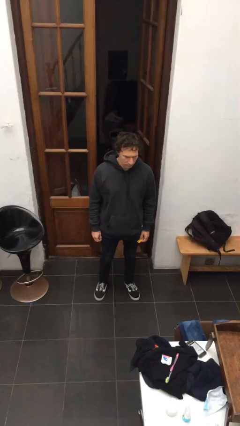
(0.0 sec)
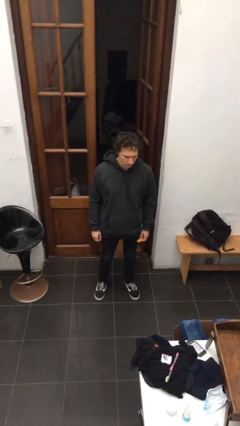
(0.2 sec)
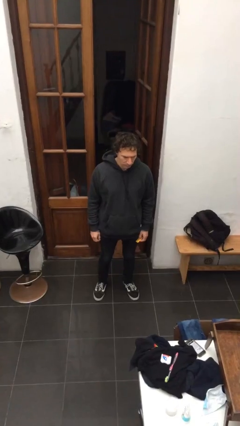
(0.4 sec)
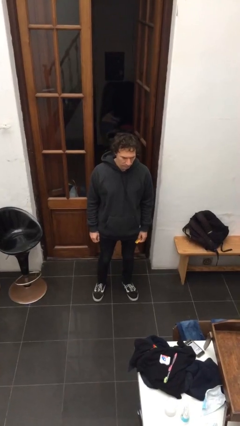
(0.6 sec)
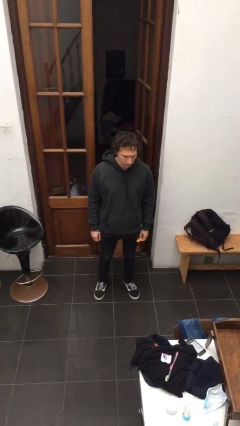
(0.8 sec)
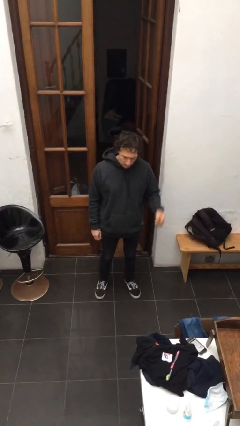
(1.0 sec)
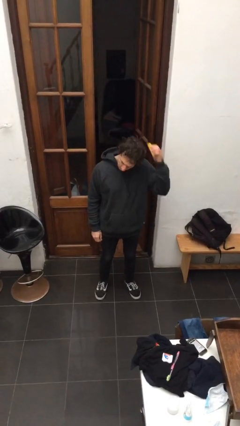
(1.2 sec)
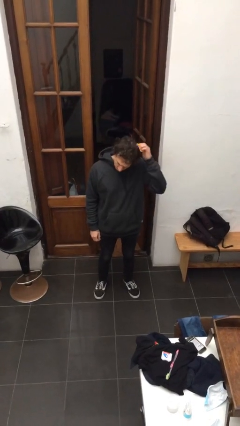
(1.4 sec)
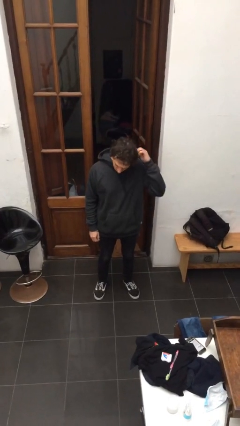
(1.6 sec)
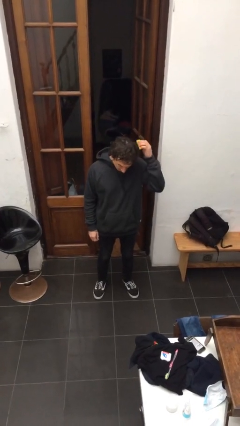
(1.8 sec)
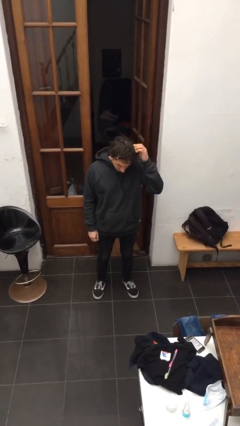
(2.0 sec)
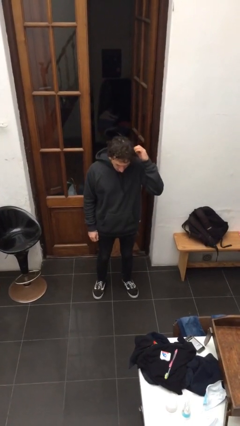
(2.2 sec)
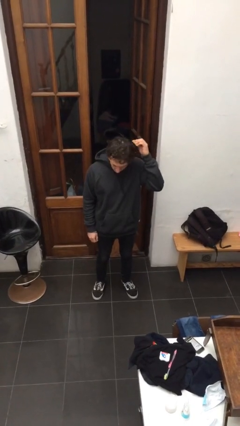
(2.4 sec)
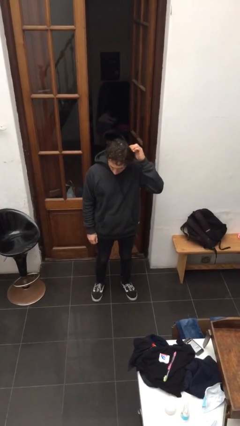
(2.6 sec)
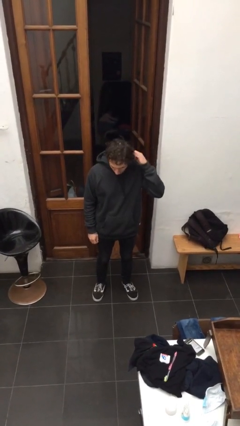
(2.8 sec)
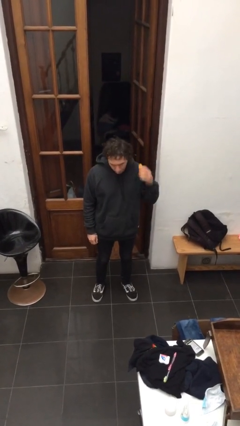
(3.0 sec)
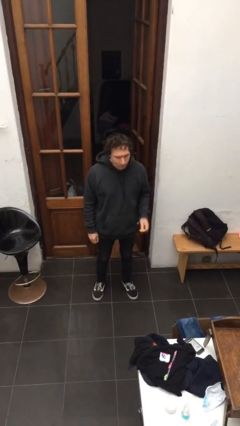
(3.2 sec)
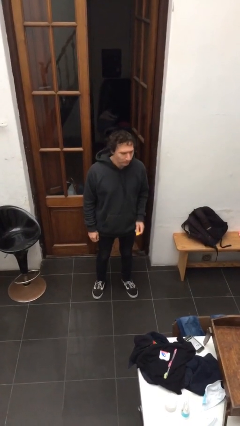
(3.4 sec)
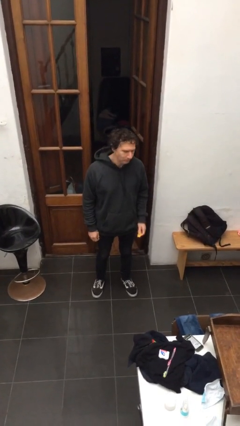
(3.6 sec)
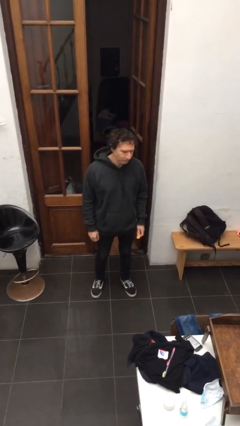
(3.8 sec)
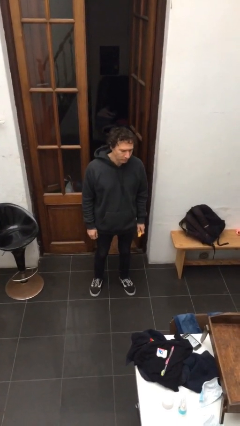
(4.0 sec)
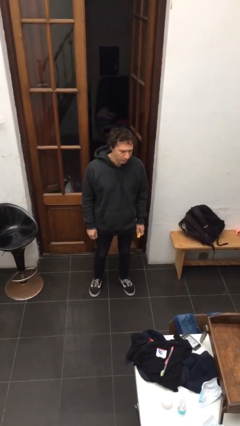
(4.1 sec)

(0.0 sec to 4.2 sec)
person brushes hair

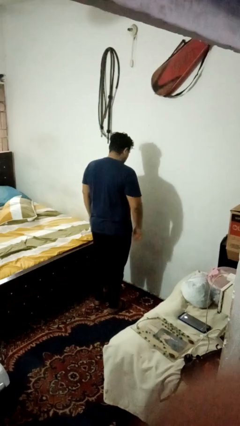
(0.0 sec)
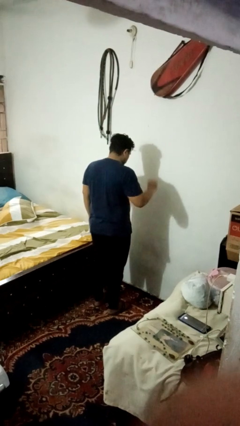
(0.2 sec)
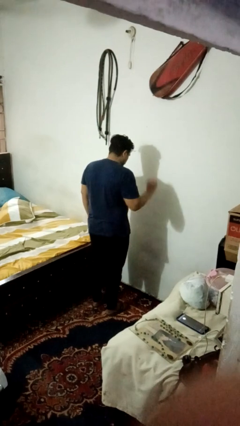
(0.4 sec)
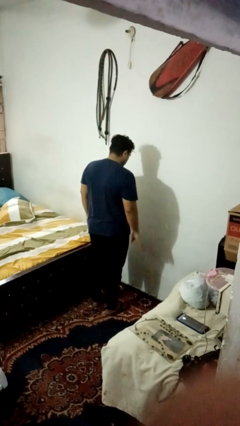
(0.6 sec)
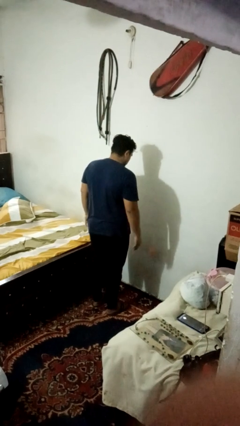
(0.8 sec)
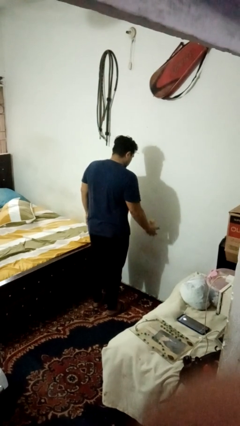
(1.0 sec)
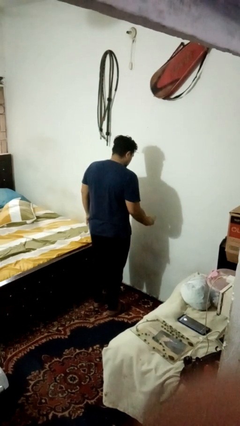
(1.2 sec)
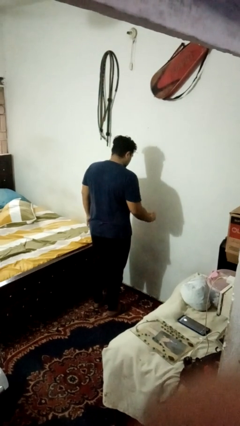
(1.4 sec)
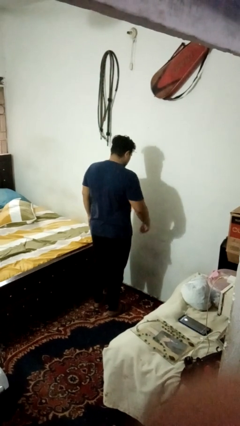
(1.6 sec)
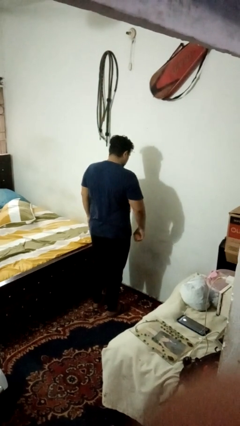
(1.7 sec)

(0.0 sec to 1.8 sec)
person bounces ball on floor

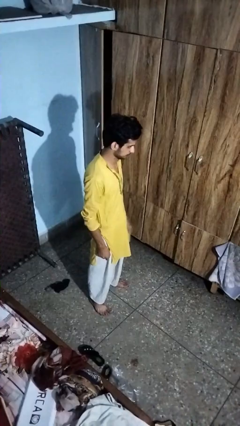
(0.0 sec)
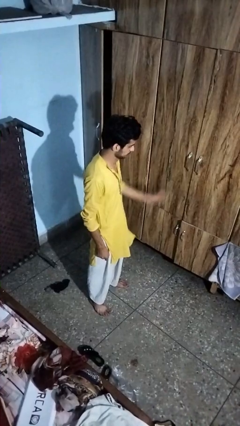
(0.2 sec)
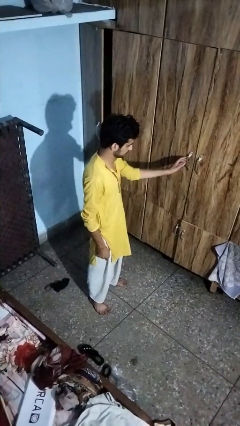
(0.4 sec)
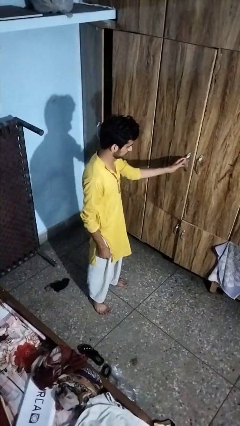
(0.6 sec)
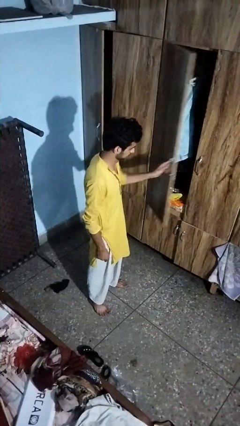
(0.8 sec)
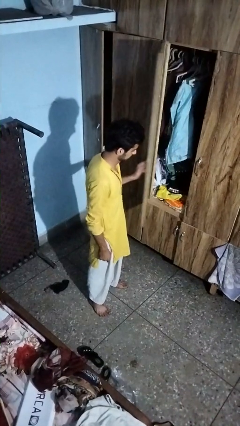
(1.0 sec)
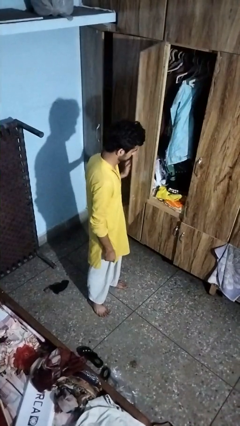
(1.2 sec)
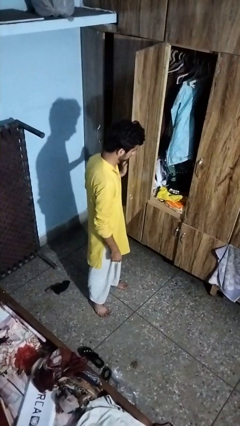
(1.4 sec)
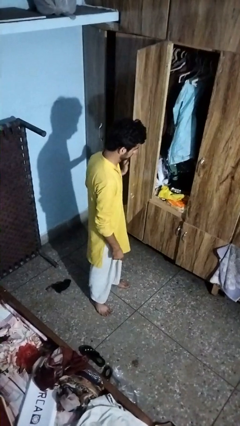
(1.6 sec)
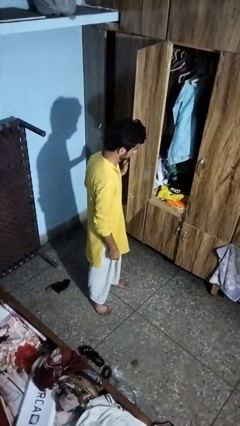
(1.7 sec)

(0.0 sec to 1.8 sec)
person opens closet door

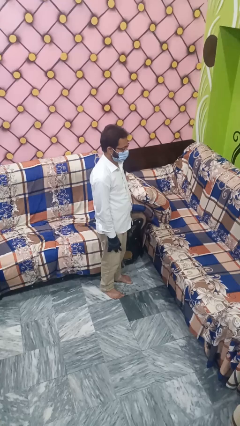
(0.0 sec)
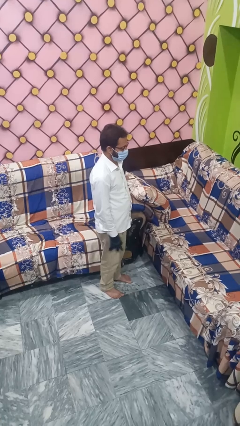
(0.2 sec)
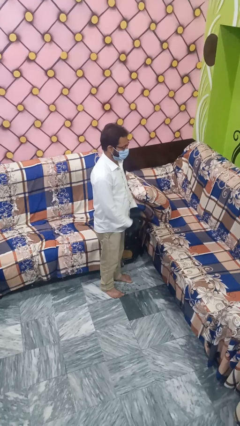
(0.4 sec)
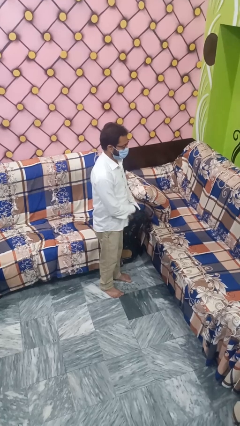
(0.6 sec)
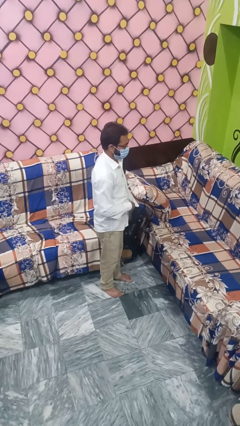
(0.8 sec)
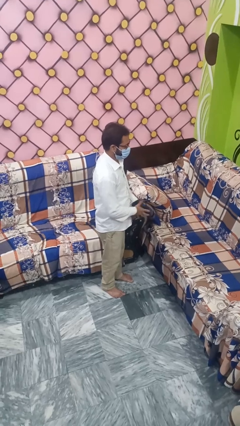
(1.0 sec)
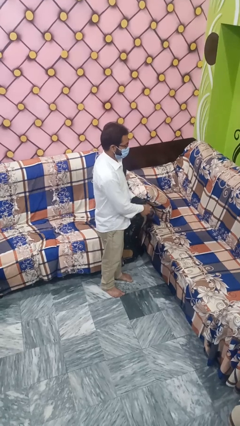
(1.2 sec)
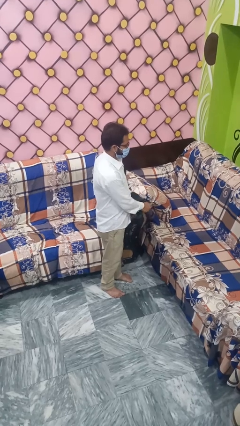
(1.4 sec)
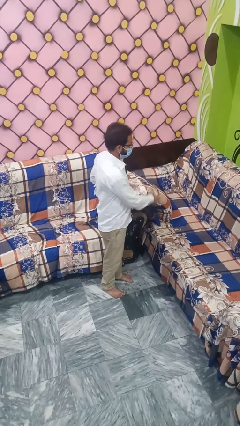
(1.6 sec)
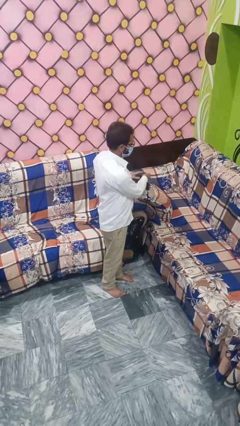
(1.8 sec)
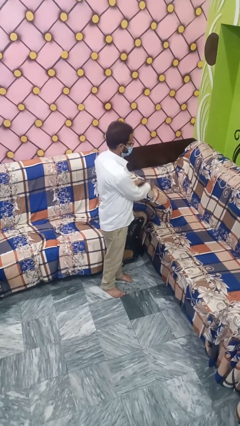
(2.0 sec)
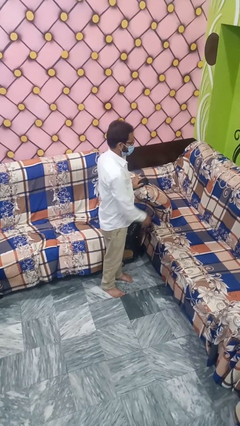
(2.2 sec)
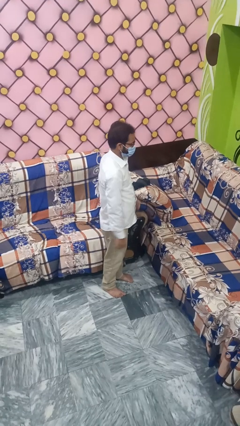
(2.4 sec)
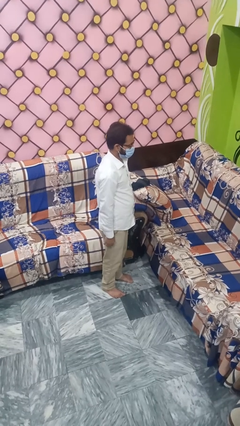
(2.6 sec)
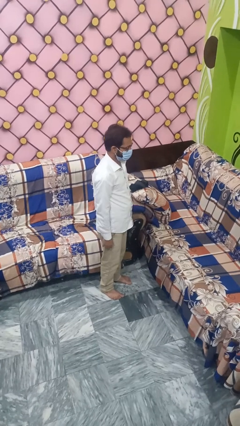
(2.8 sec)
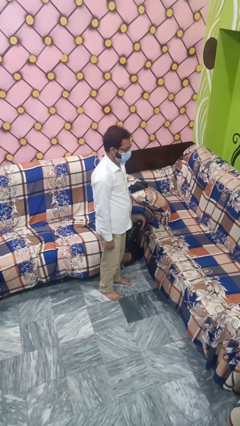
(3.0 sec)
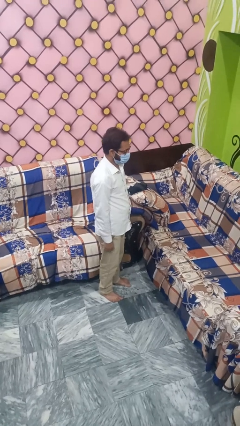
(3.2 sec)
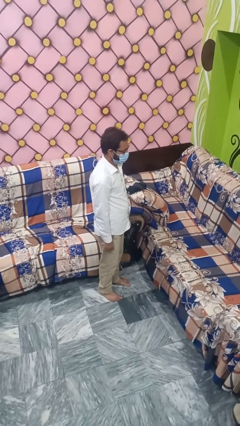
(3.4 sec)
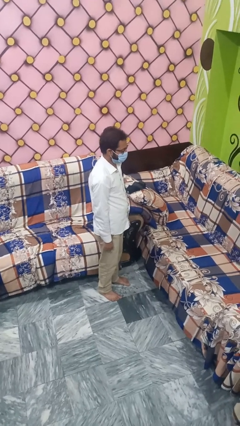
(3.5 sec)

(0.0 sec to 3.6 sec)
person takes off gloves

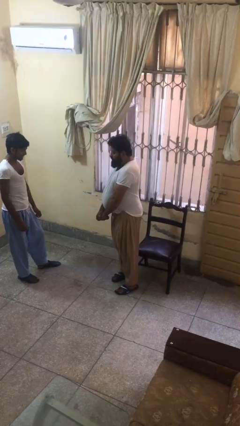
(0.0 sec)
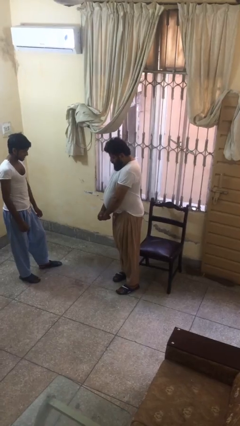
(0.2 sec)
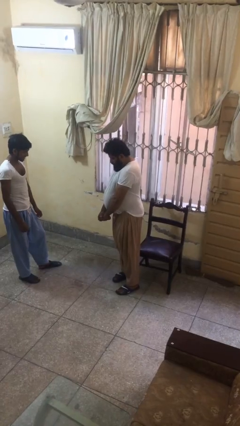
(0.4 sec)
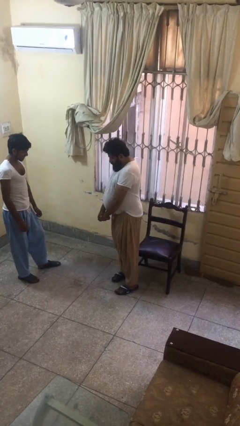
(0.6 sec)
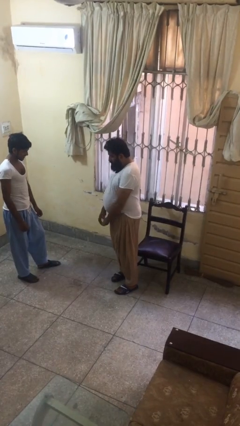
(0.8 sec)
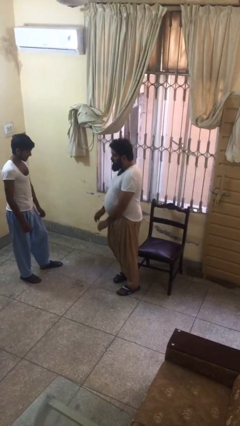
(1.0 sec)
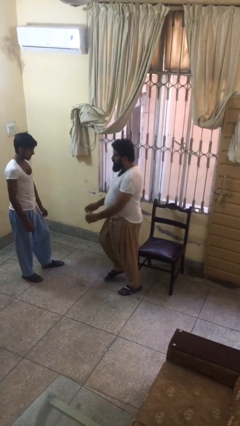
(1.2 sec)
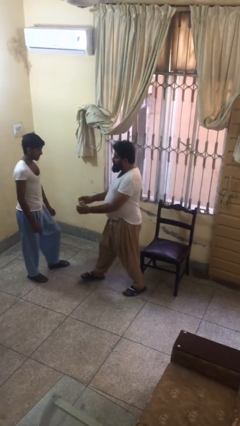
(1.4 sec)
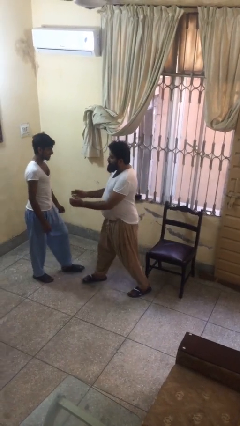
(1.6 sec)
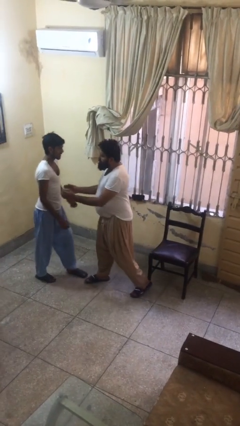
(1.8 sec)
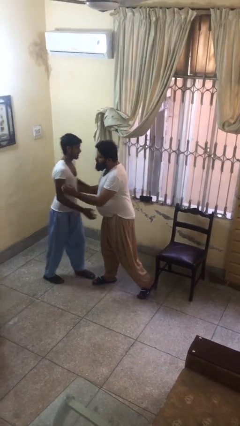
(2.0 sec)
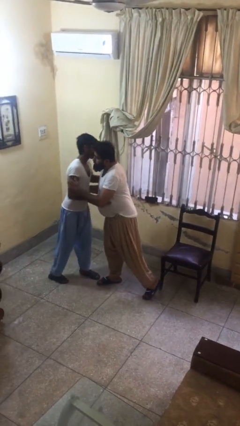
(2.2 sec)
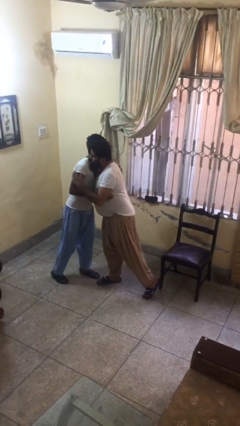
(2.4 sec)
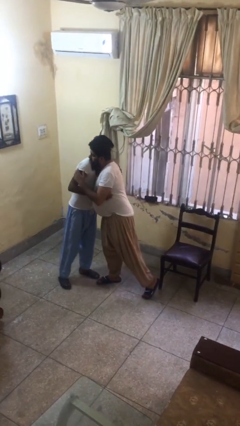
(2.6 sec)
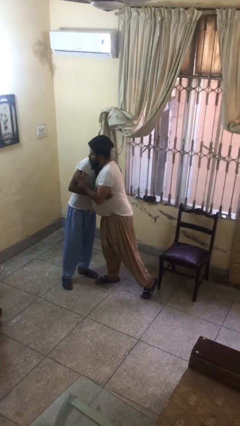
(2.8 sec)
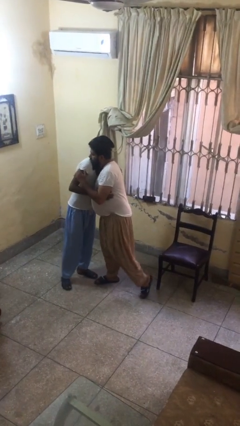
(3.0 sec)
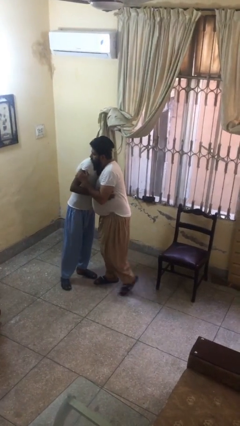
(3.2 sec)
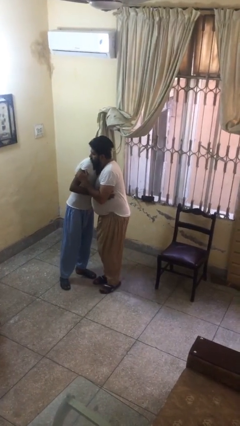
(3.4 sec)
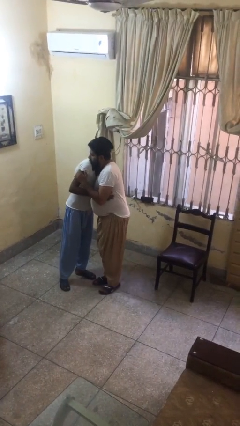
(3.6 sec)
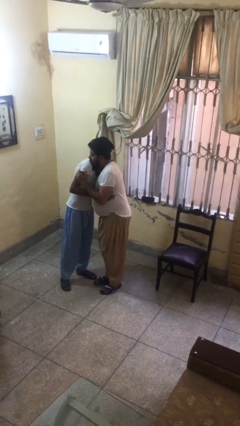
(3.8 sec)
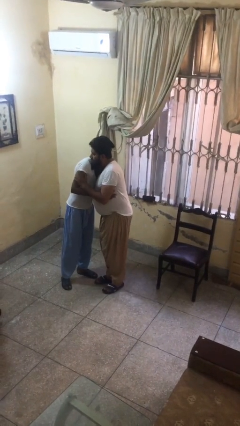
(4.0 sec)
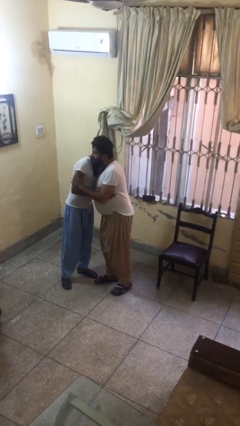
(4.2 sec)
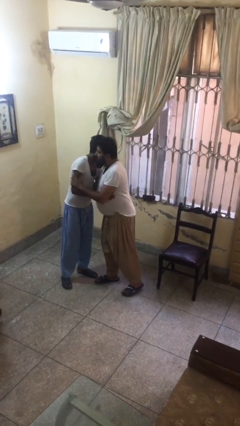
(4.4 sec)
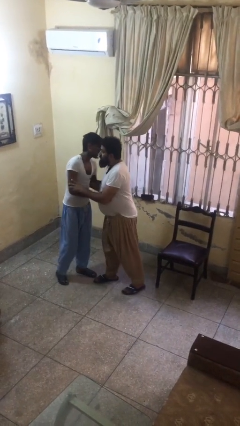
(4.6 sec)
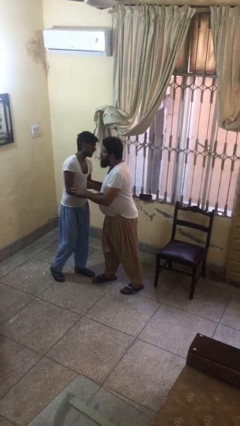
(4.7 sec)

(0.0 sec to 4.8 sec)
person embraces person

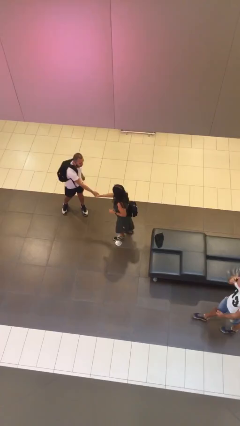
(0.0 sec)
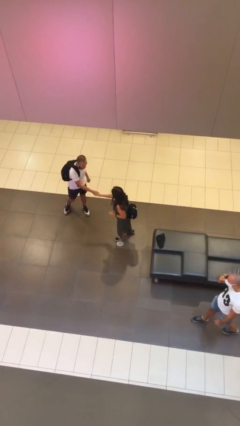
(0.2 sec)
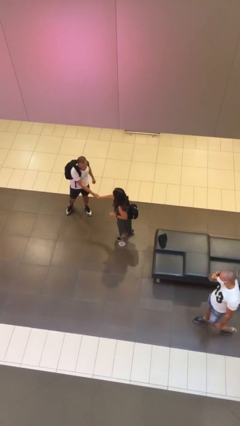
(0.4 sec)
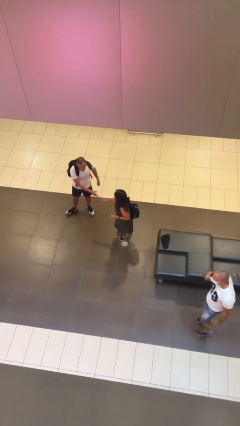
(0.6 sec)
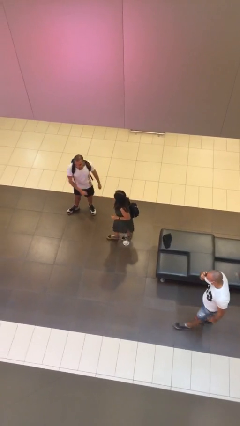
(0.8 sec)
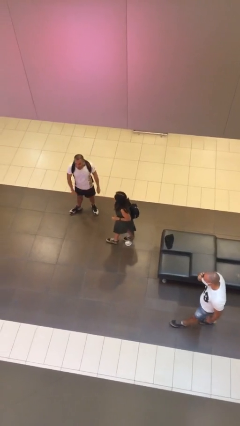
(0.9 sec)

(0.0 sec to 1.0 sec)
person shakes hand

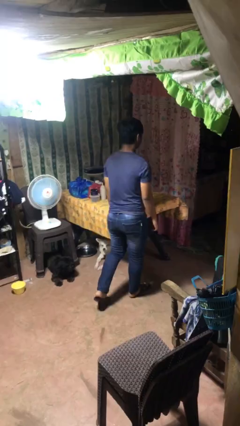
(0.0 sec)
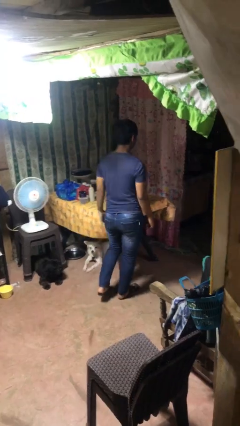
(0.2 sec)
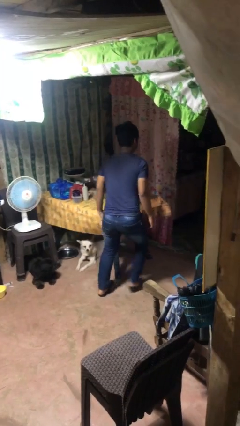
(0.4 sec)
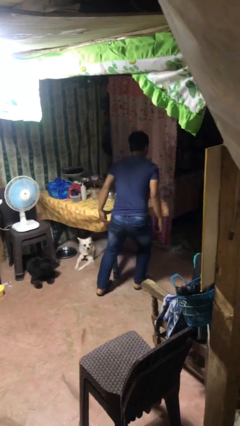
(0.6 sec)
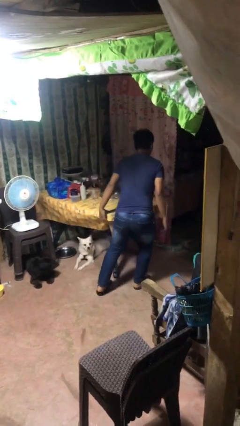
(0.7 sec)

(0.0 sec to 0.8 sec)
person bumps into table
